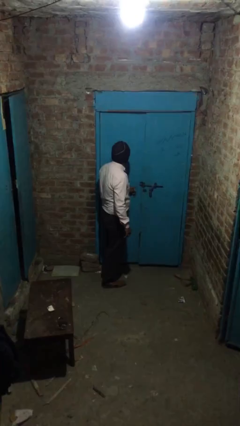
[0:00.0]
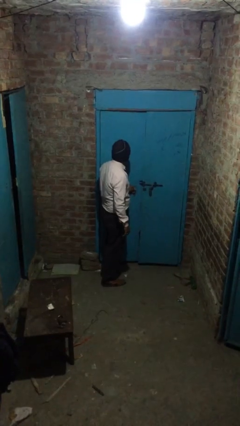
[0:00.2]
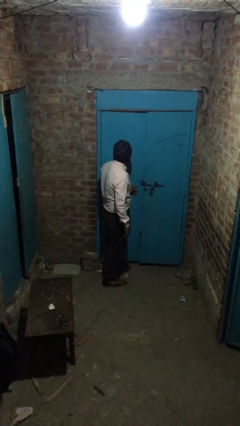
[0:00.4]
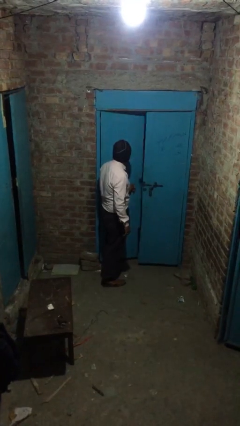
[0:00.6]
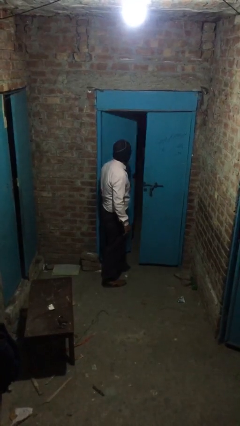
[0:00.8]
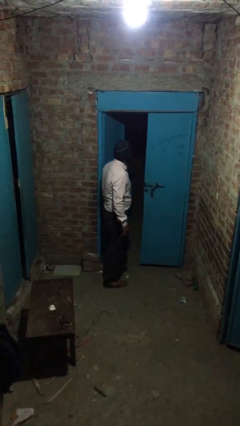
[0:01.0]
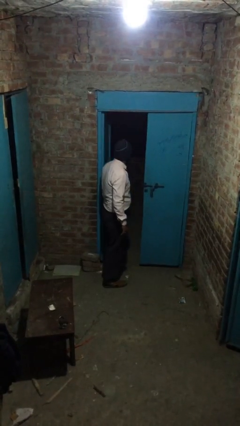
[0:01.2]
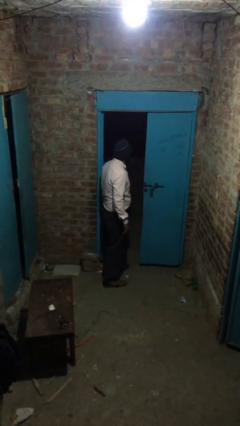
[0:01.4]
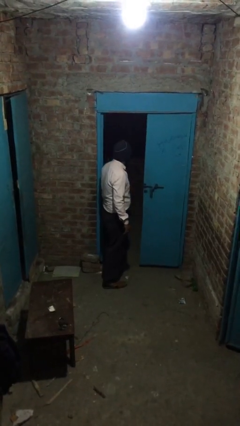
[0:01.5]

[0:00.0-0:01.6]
person opens facility door

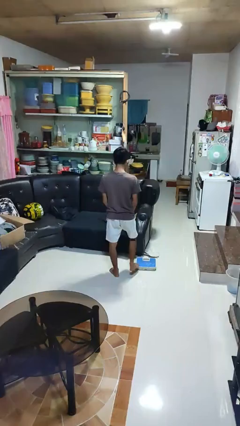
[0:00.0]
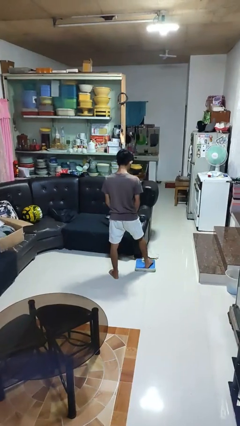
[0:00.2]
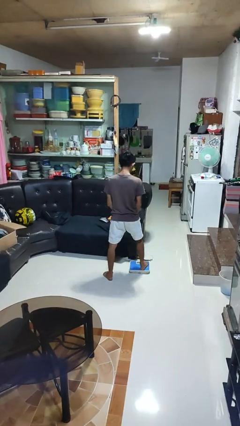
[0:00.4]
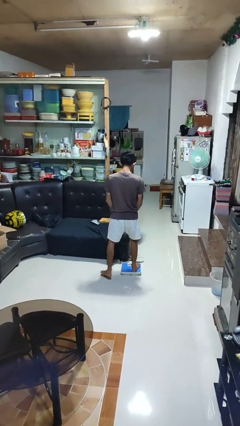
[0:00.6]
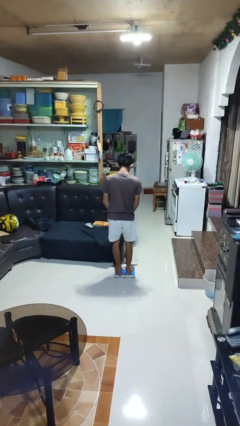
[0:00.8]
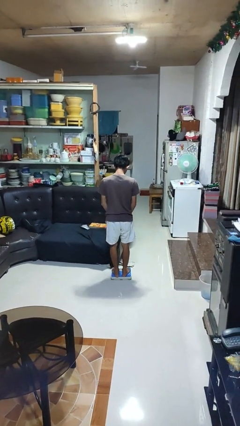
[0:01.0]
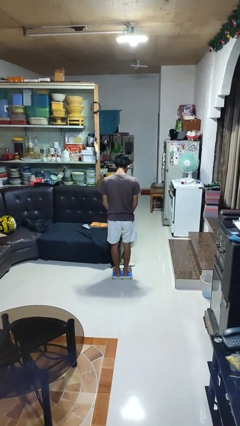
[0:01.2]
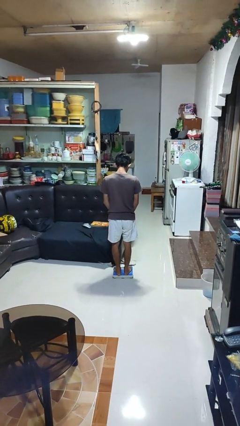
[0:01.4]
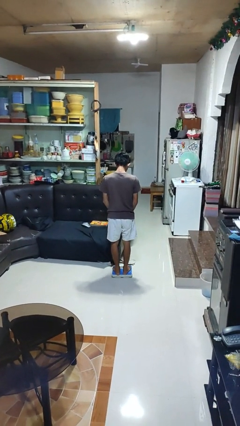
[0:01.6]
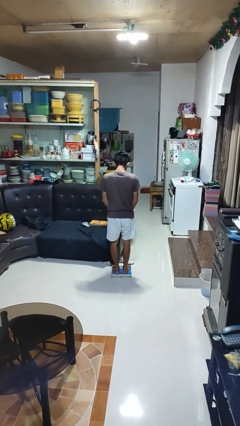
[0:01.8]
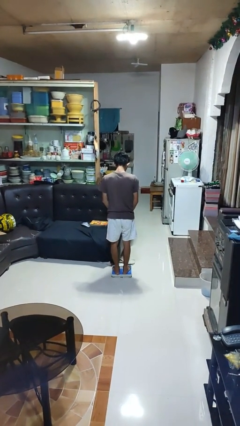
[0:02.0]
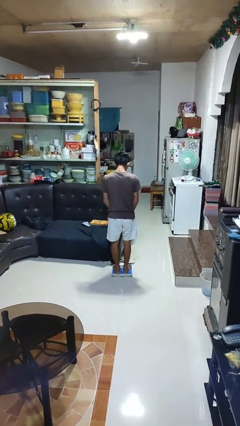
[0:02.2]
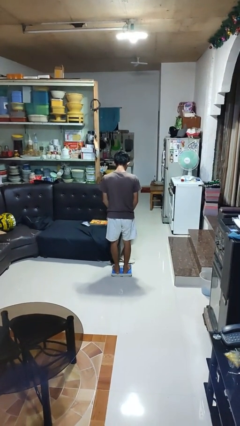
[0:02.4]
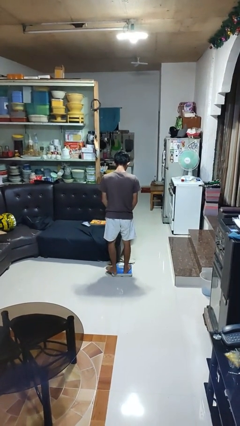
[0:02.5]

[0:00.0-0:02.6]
person uses bodyweight scale

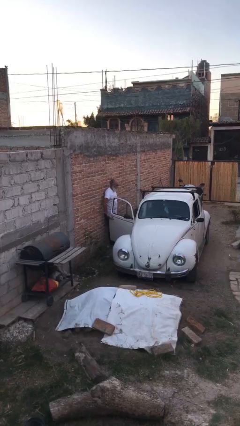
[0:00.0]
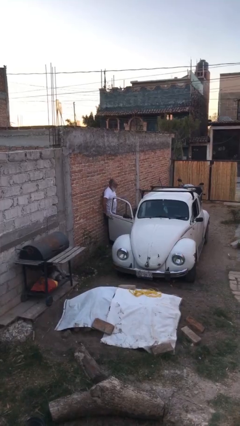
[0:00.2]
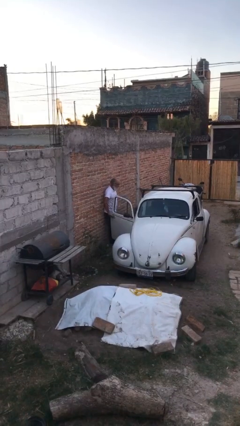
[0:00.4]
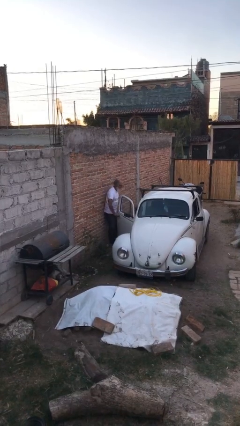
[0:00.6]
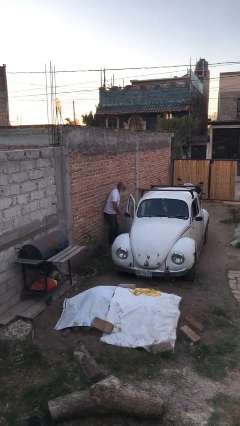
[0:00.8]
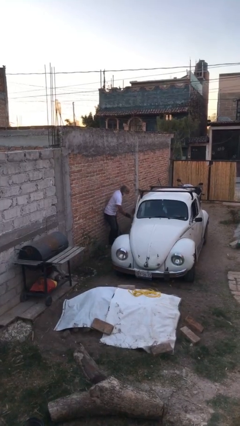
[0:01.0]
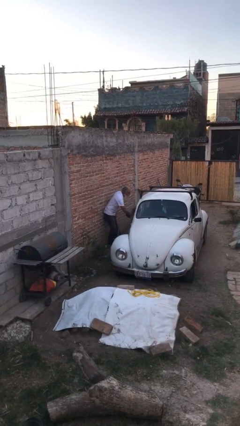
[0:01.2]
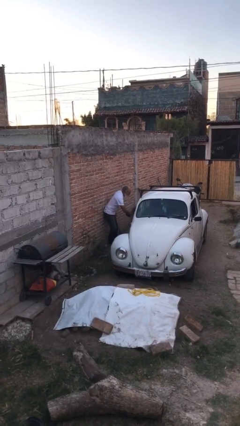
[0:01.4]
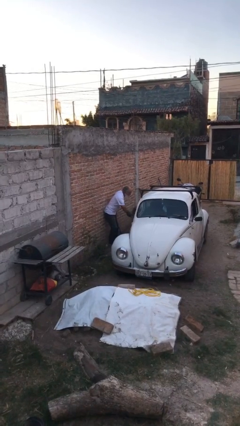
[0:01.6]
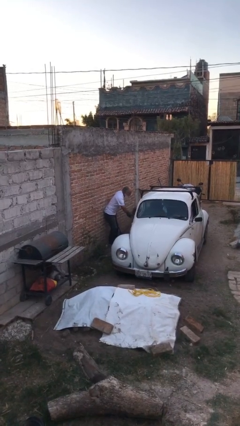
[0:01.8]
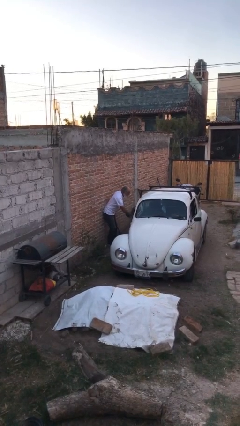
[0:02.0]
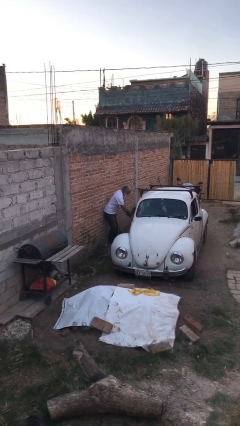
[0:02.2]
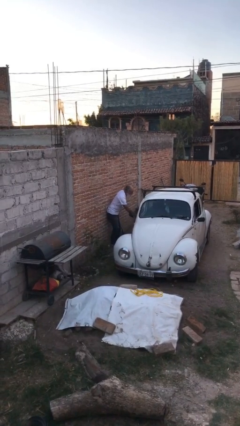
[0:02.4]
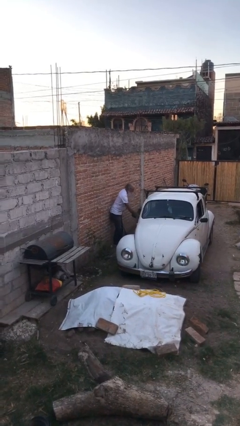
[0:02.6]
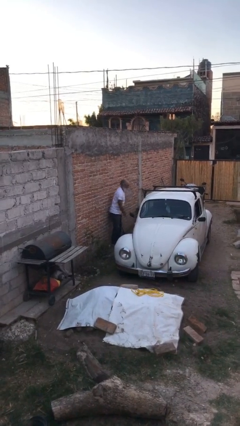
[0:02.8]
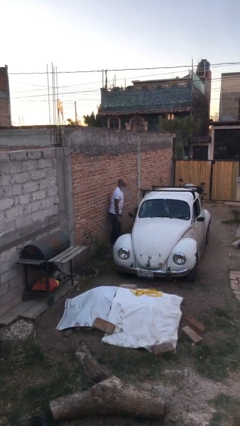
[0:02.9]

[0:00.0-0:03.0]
person closes car door

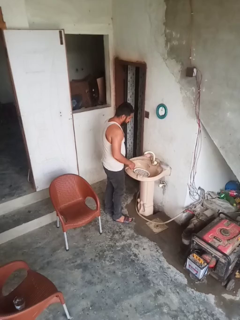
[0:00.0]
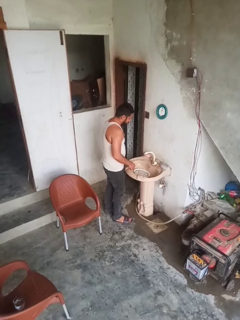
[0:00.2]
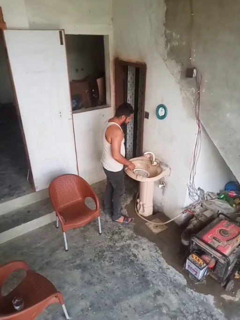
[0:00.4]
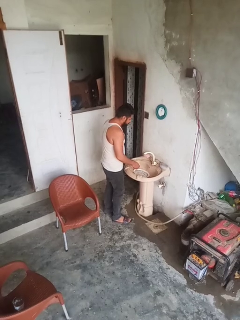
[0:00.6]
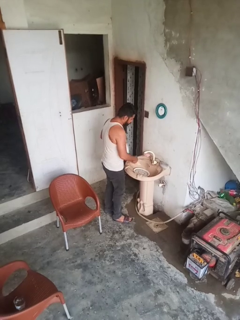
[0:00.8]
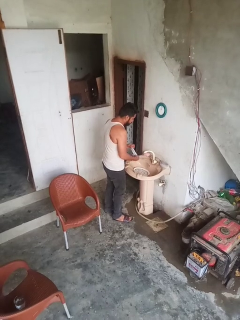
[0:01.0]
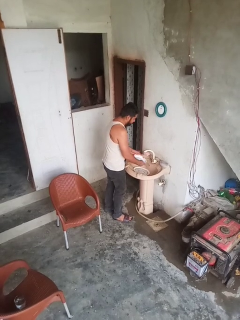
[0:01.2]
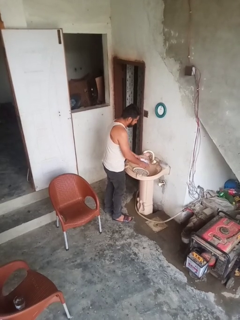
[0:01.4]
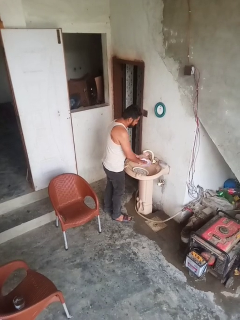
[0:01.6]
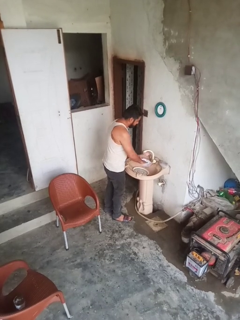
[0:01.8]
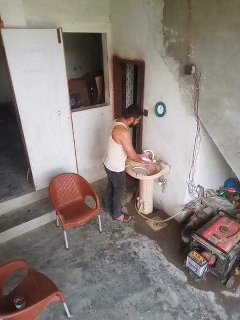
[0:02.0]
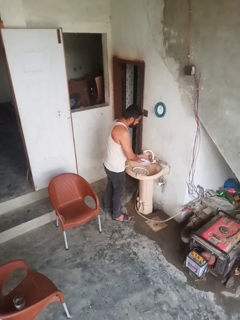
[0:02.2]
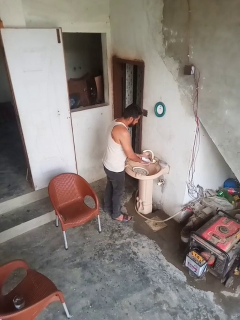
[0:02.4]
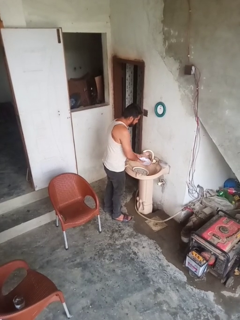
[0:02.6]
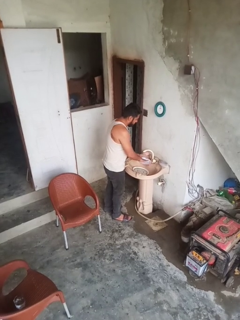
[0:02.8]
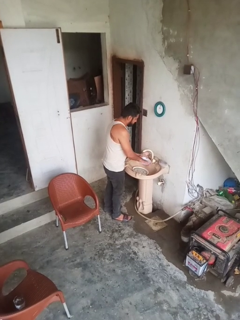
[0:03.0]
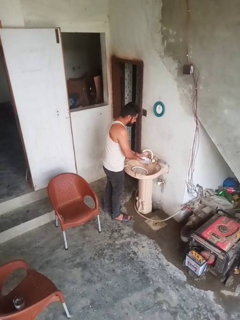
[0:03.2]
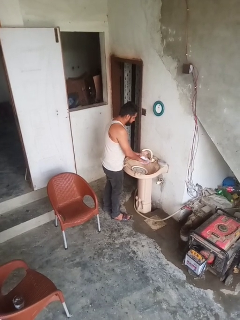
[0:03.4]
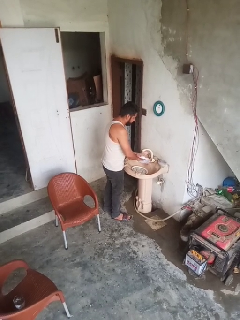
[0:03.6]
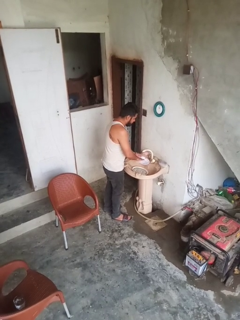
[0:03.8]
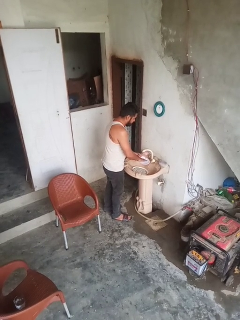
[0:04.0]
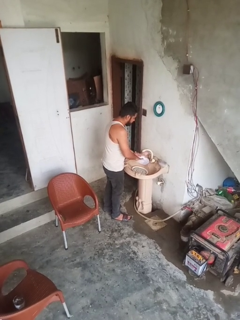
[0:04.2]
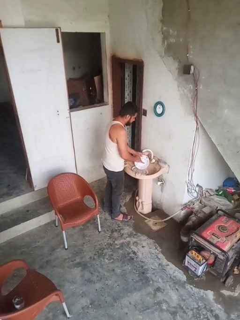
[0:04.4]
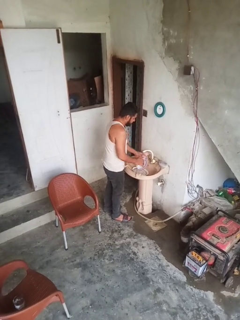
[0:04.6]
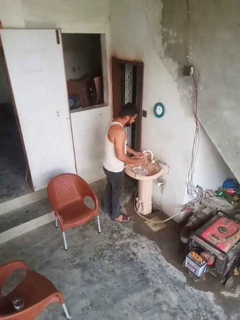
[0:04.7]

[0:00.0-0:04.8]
person washes dish

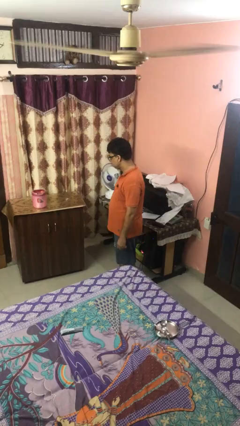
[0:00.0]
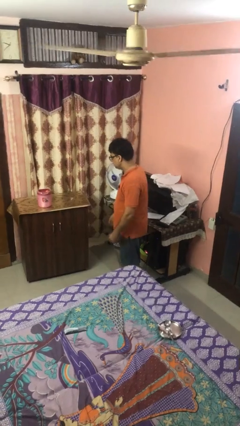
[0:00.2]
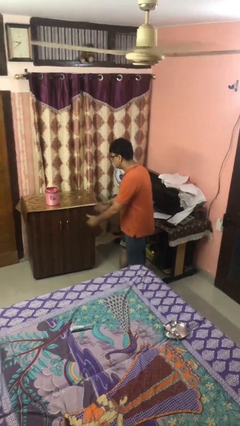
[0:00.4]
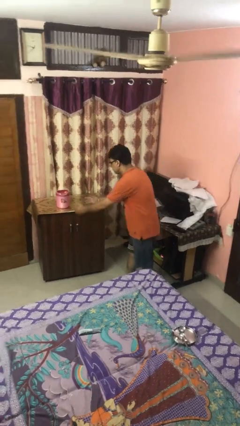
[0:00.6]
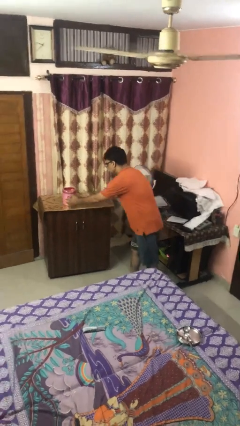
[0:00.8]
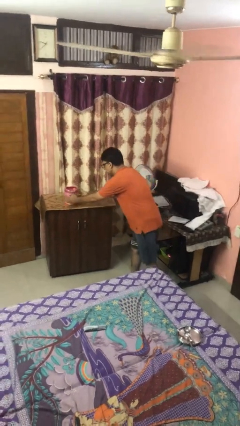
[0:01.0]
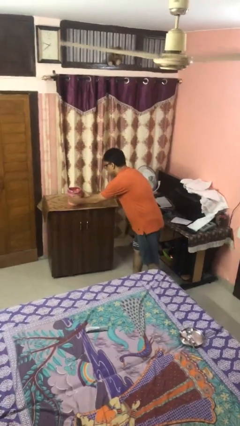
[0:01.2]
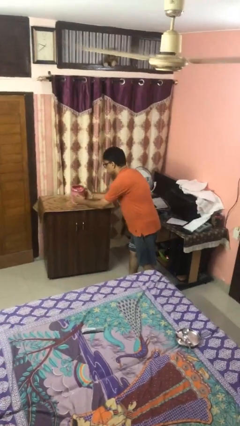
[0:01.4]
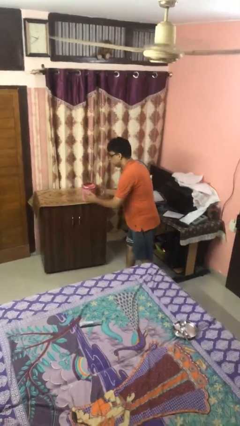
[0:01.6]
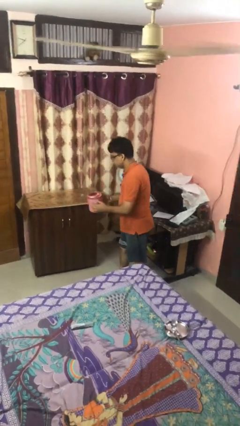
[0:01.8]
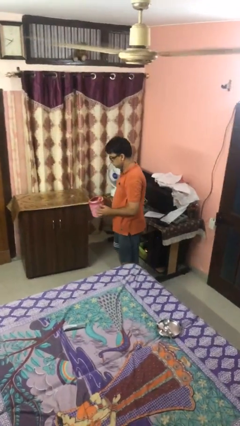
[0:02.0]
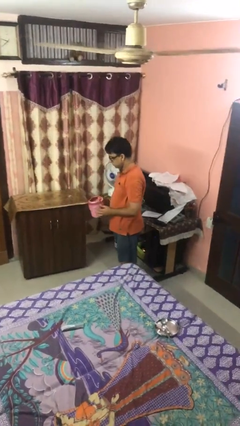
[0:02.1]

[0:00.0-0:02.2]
person picks up object from countertop

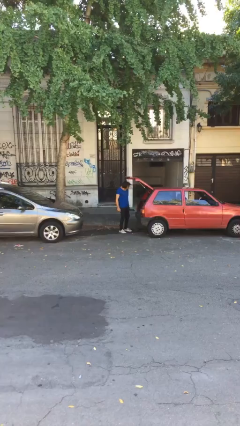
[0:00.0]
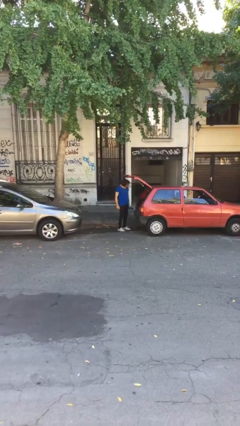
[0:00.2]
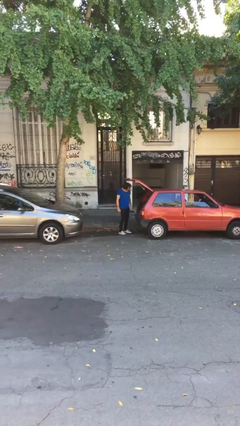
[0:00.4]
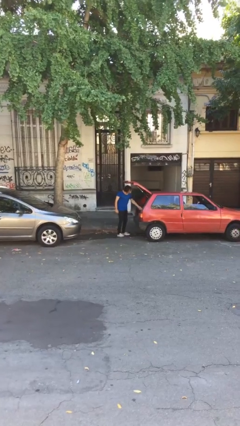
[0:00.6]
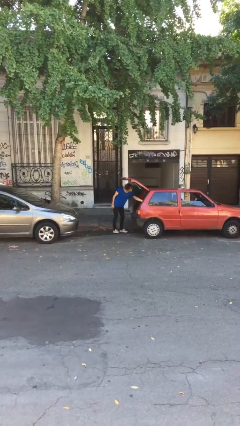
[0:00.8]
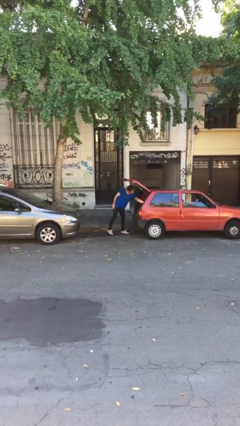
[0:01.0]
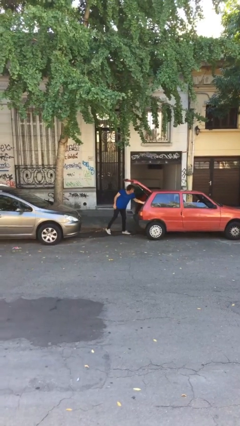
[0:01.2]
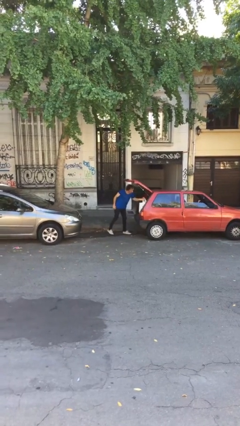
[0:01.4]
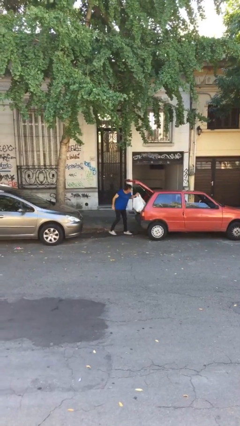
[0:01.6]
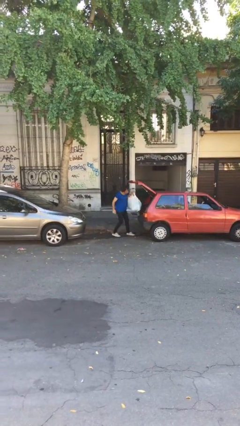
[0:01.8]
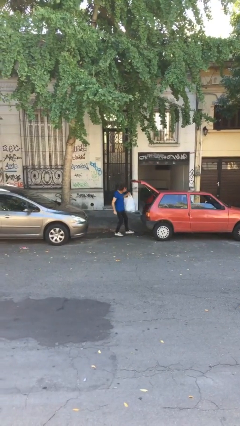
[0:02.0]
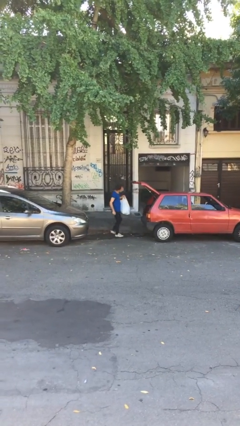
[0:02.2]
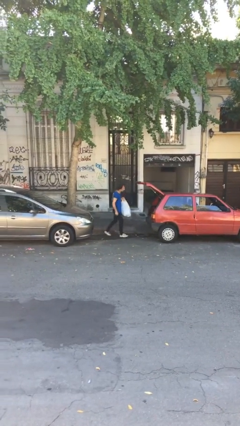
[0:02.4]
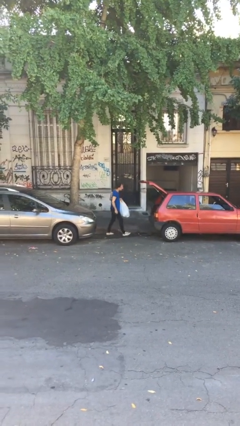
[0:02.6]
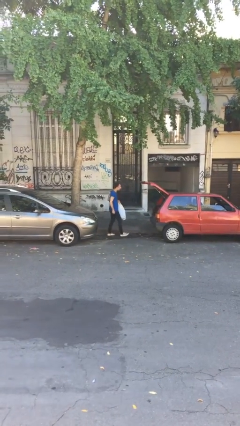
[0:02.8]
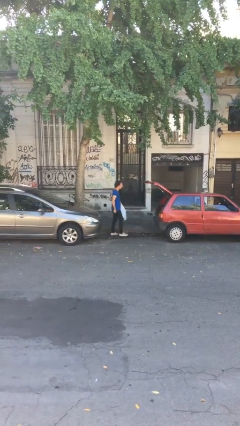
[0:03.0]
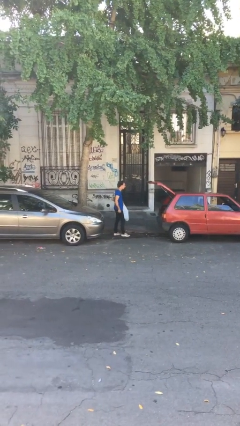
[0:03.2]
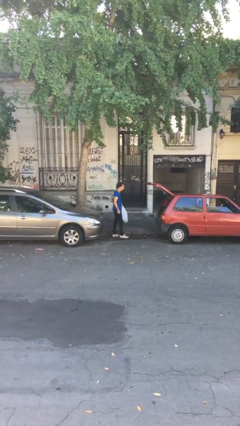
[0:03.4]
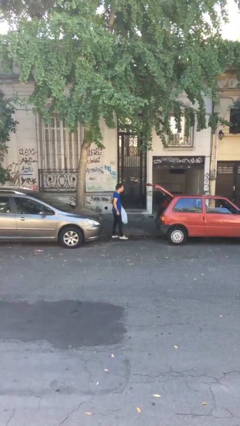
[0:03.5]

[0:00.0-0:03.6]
person unloads car

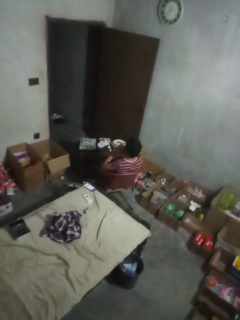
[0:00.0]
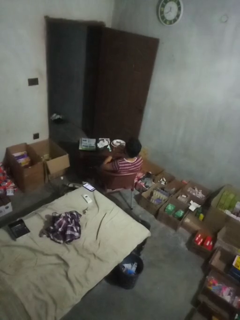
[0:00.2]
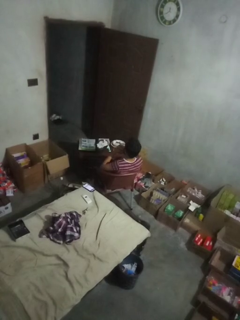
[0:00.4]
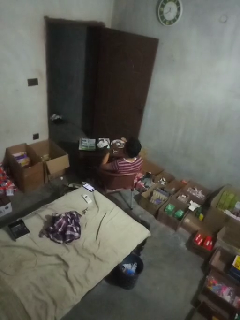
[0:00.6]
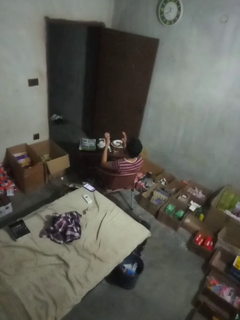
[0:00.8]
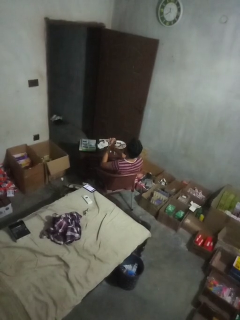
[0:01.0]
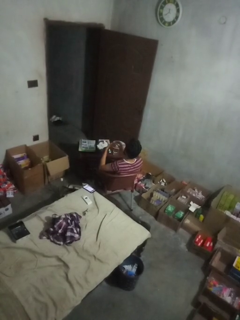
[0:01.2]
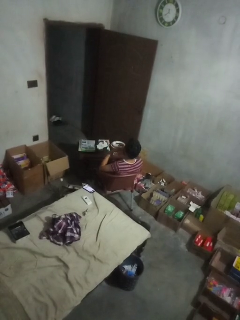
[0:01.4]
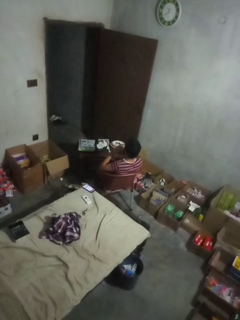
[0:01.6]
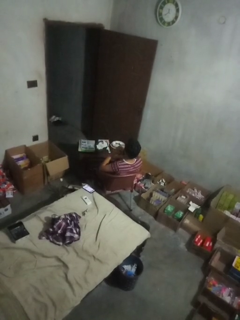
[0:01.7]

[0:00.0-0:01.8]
person claps hands
